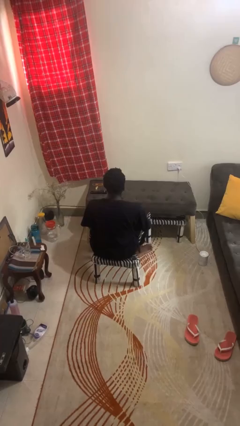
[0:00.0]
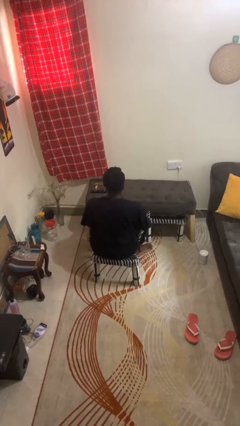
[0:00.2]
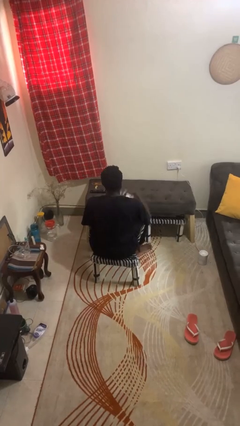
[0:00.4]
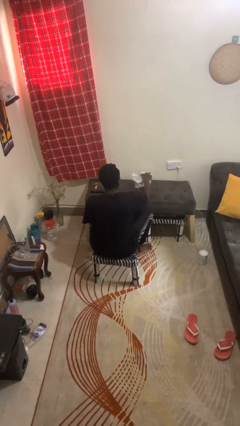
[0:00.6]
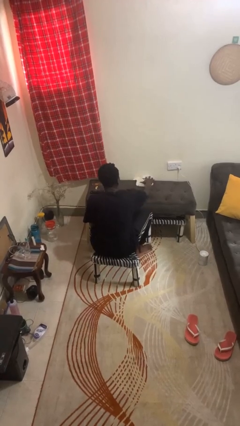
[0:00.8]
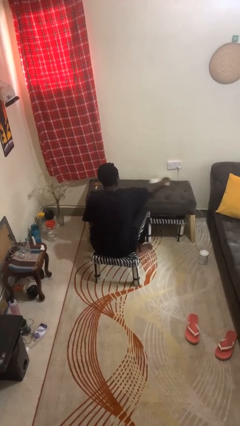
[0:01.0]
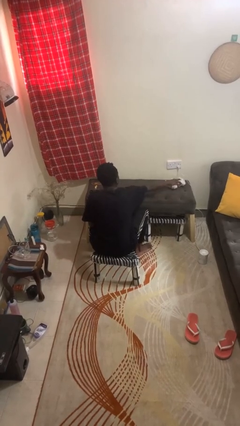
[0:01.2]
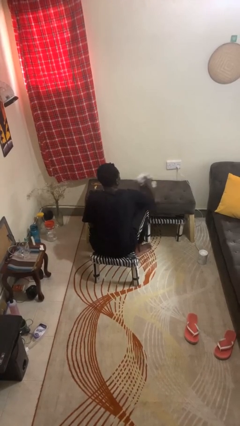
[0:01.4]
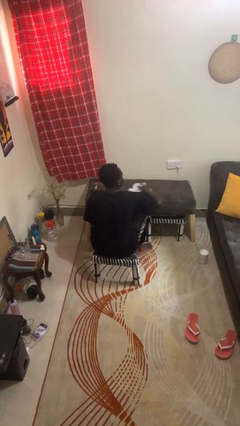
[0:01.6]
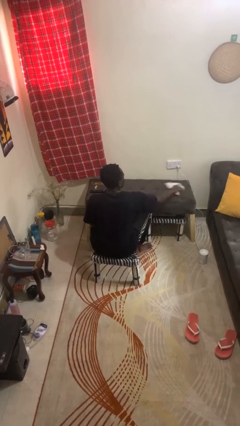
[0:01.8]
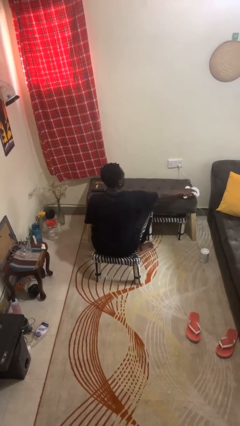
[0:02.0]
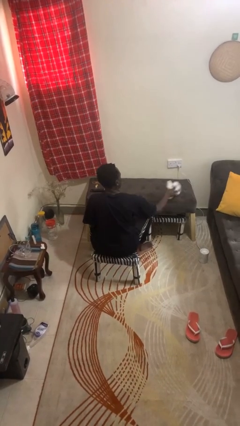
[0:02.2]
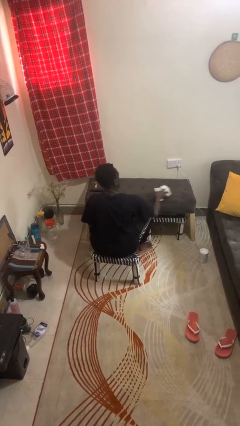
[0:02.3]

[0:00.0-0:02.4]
person cleans table with rag

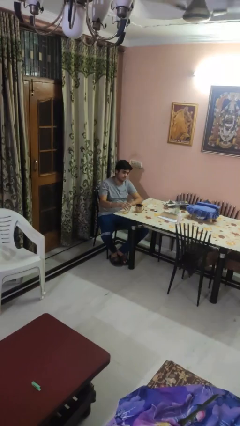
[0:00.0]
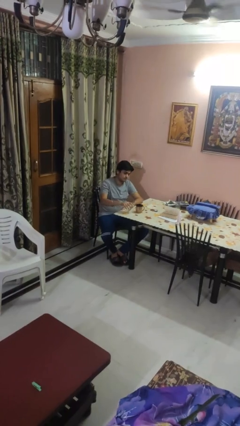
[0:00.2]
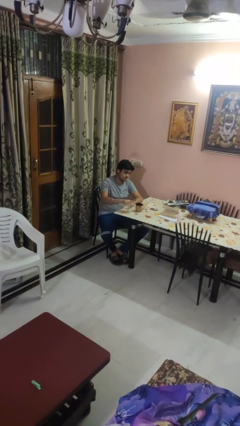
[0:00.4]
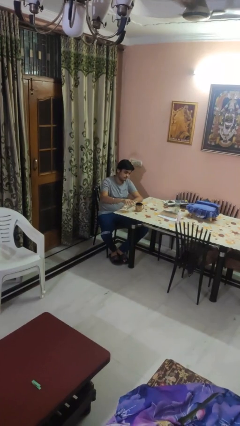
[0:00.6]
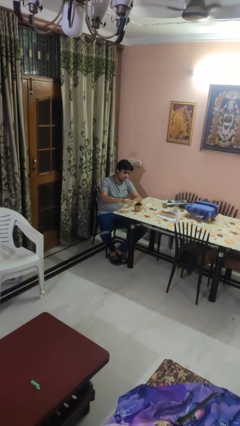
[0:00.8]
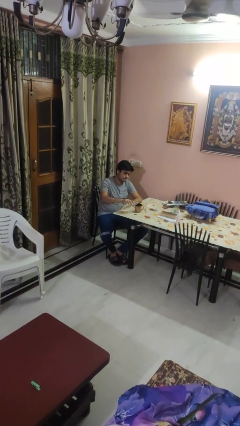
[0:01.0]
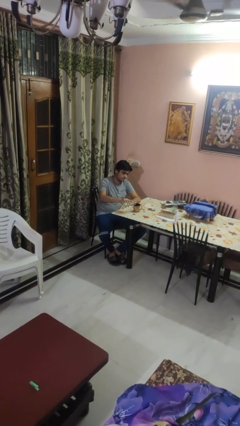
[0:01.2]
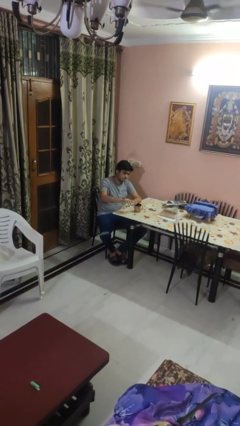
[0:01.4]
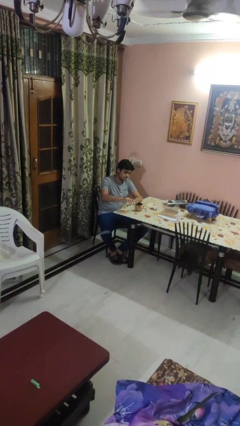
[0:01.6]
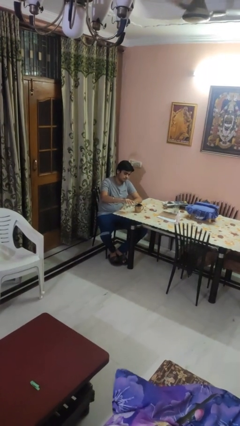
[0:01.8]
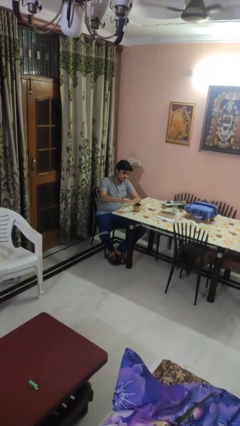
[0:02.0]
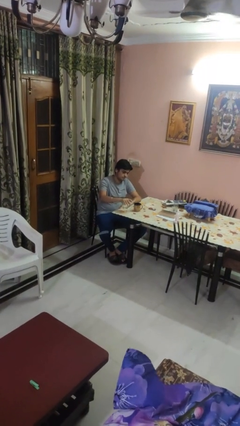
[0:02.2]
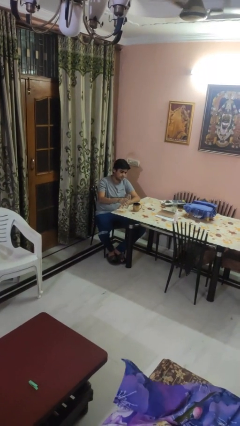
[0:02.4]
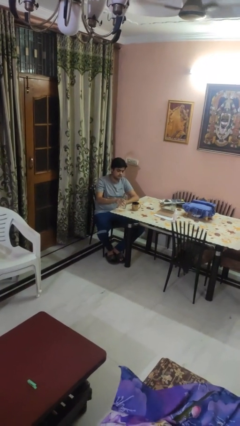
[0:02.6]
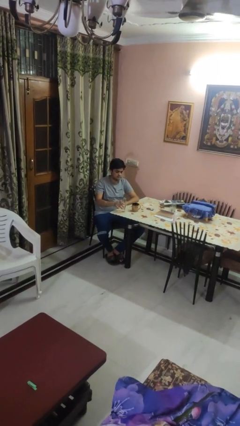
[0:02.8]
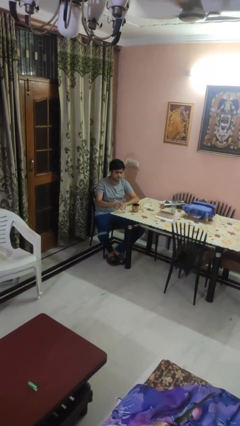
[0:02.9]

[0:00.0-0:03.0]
person pours liquid into cup

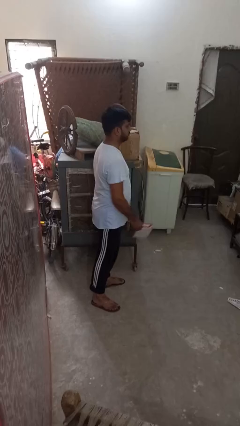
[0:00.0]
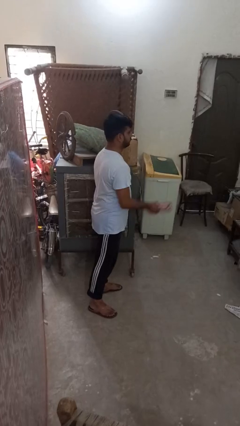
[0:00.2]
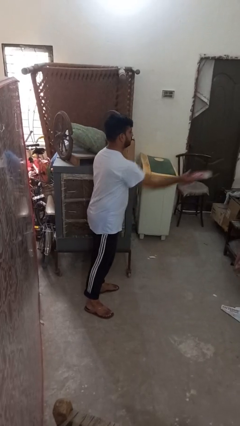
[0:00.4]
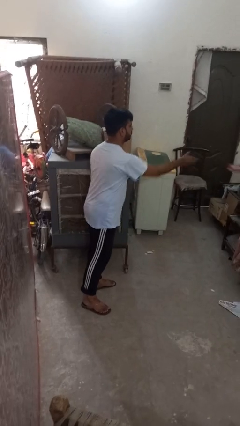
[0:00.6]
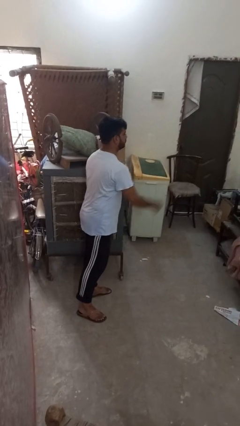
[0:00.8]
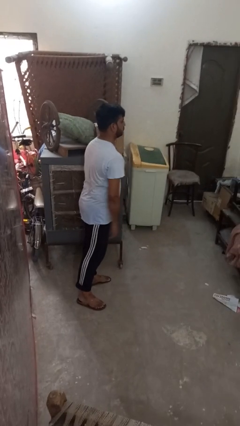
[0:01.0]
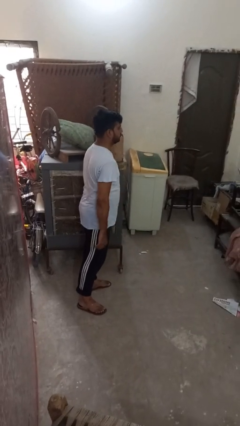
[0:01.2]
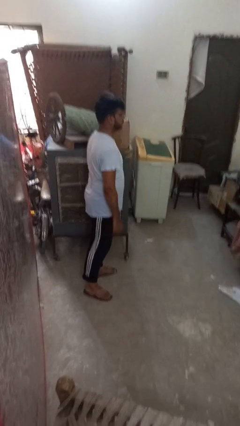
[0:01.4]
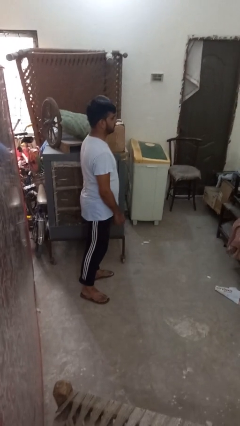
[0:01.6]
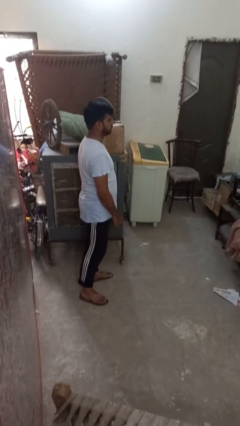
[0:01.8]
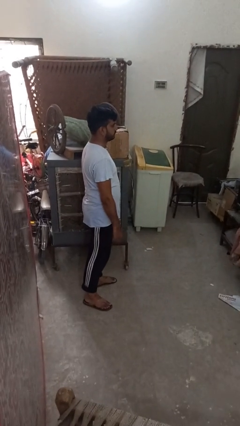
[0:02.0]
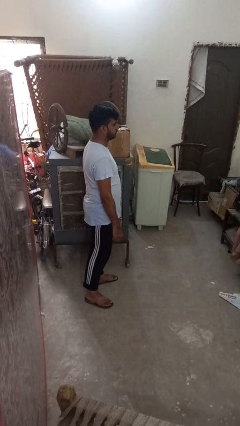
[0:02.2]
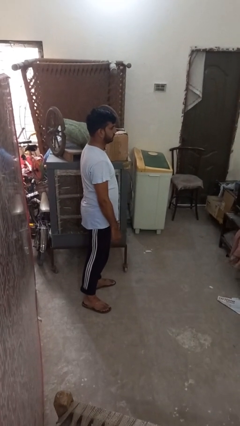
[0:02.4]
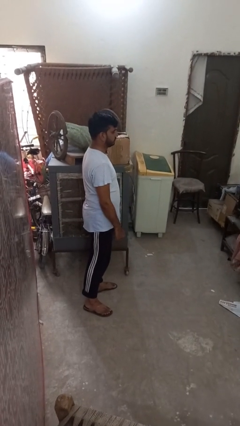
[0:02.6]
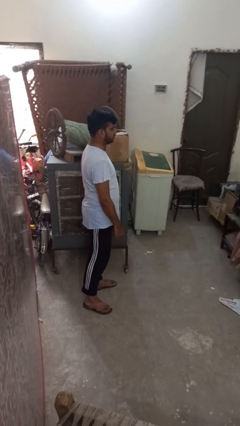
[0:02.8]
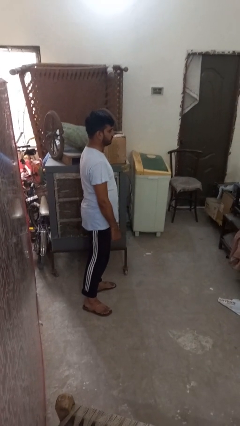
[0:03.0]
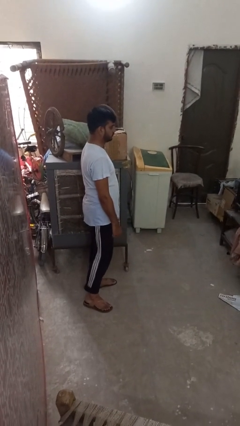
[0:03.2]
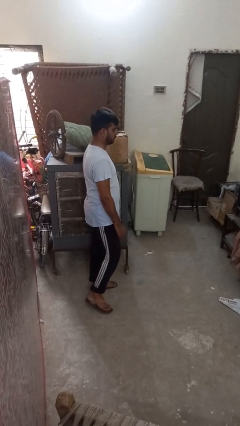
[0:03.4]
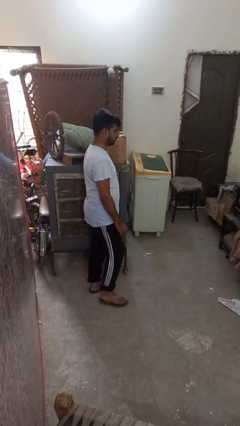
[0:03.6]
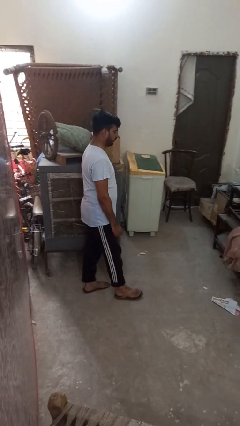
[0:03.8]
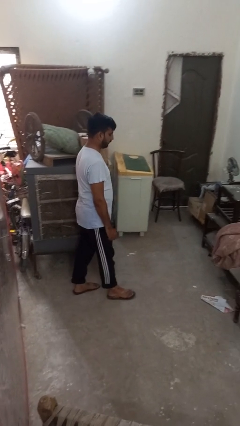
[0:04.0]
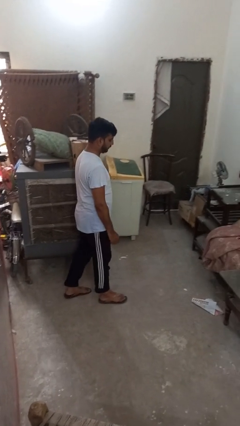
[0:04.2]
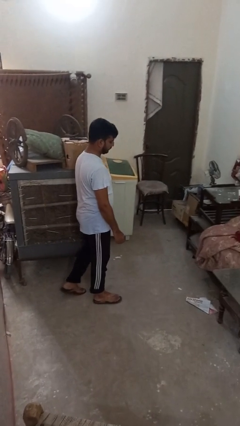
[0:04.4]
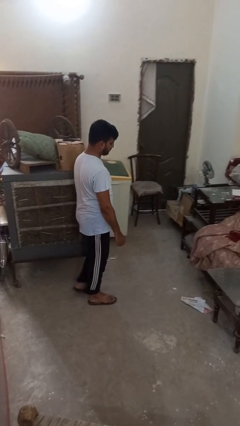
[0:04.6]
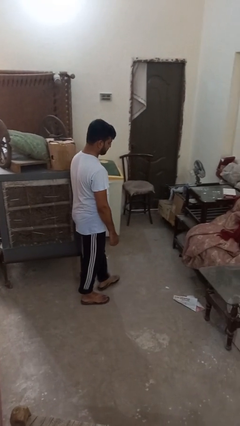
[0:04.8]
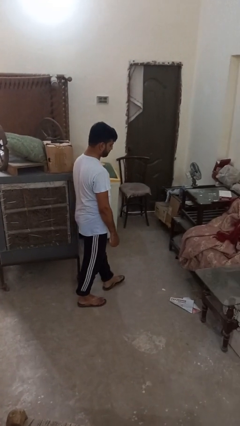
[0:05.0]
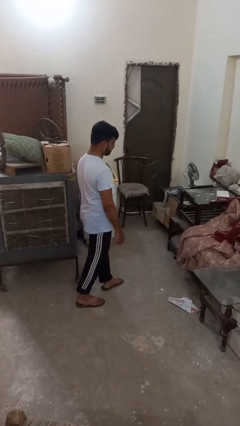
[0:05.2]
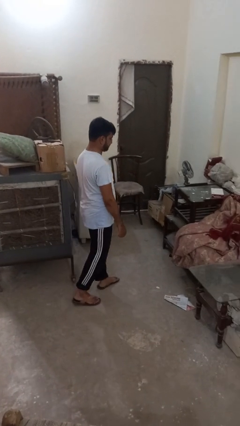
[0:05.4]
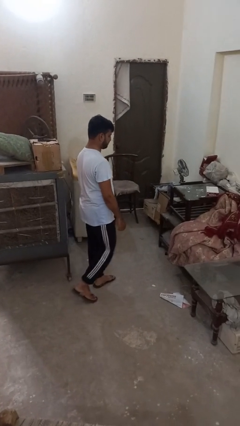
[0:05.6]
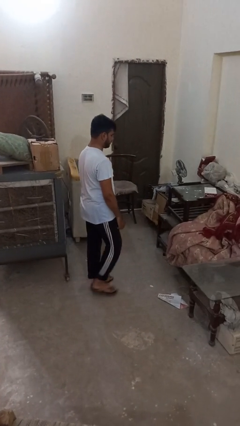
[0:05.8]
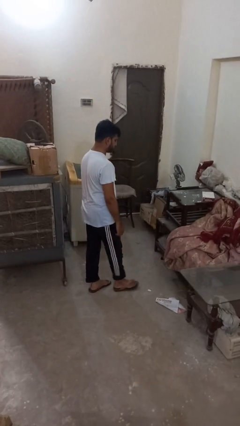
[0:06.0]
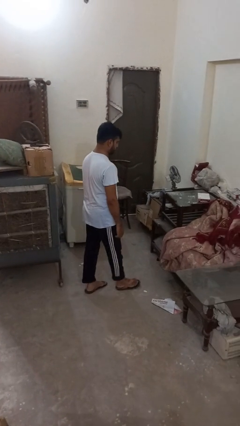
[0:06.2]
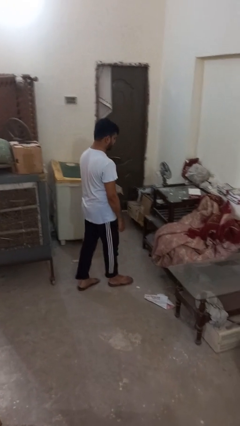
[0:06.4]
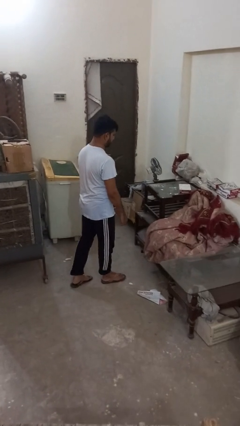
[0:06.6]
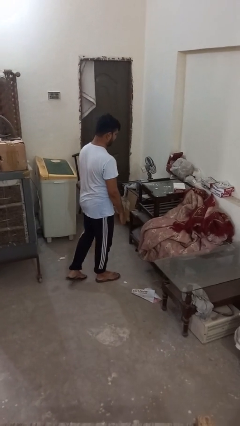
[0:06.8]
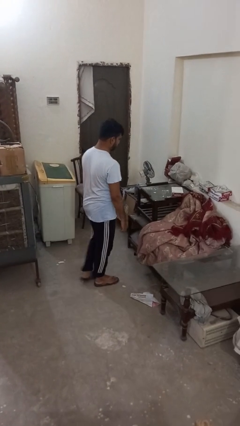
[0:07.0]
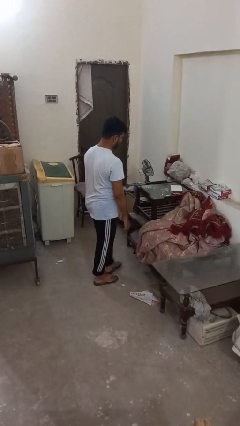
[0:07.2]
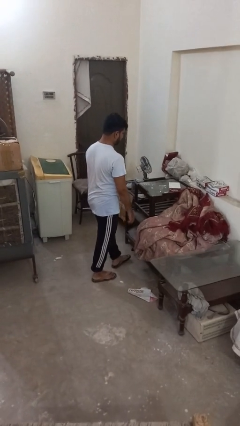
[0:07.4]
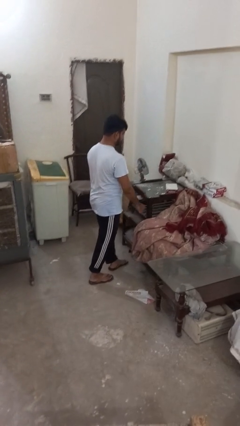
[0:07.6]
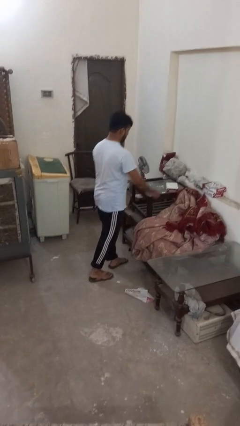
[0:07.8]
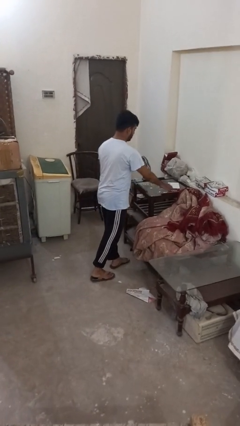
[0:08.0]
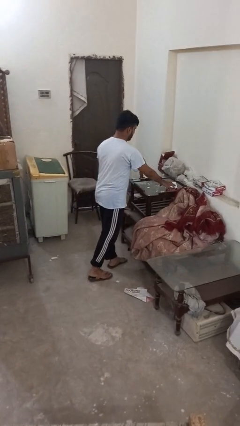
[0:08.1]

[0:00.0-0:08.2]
person throws object on table

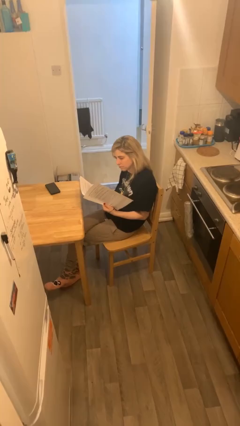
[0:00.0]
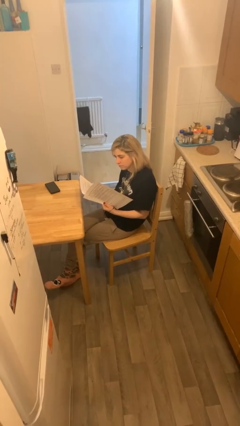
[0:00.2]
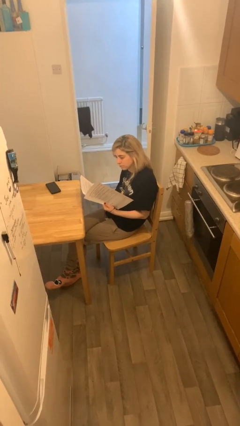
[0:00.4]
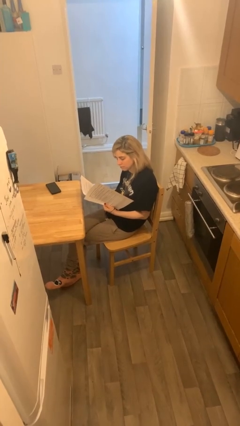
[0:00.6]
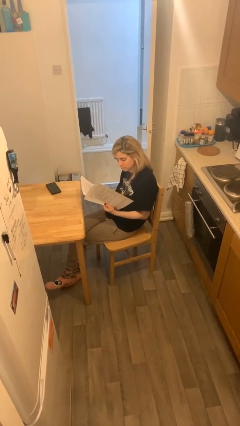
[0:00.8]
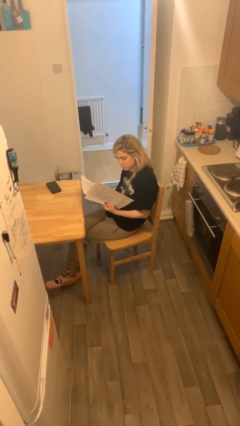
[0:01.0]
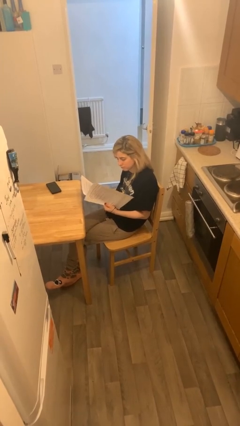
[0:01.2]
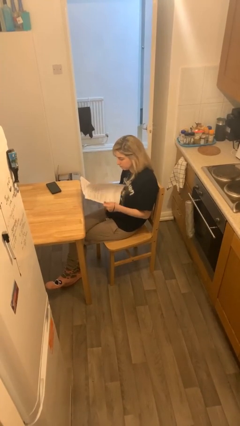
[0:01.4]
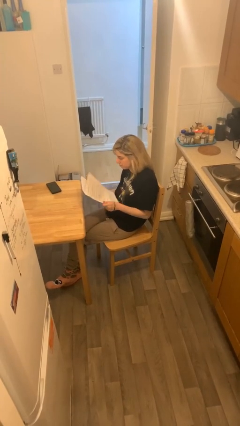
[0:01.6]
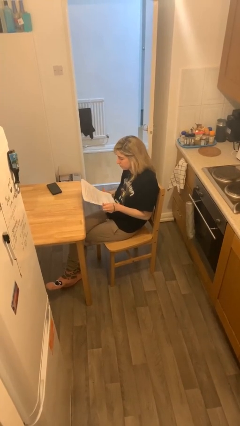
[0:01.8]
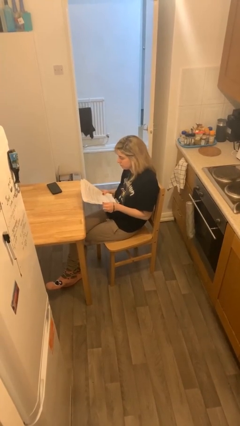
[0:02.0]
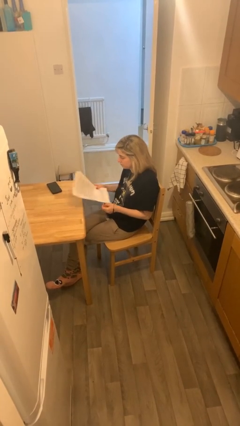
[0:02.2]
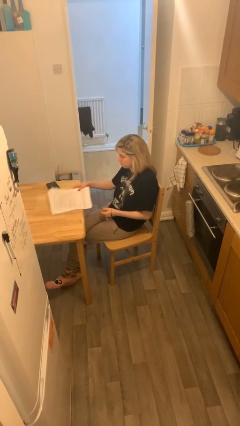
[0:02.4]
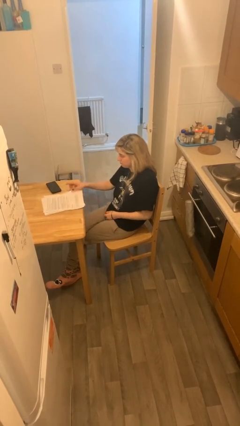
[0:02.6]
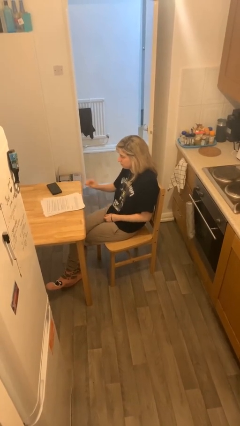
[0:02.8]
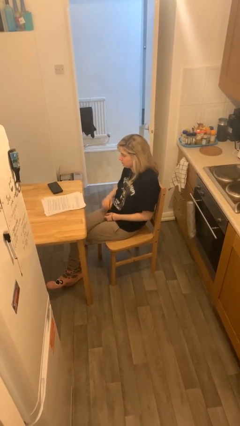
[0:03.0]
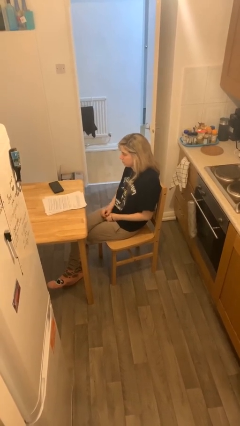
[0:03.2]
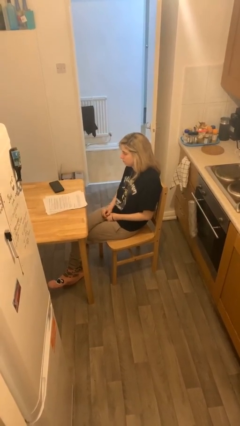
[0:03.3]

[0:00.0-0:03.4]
person puts down object on table

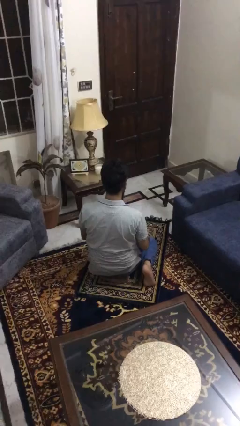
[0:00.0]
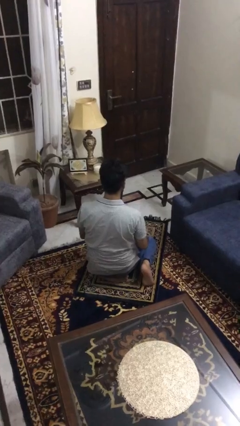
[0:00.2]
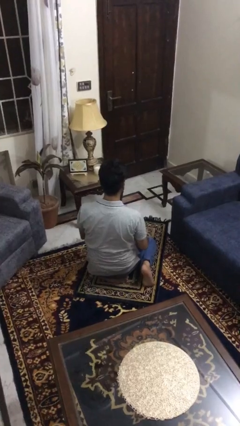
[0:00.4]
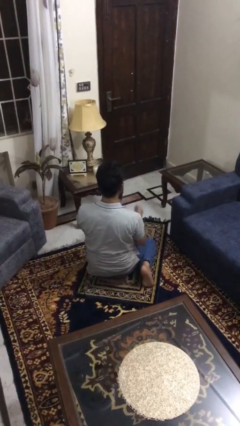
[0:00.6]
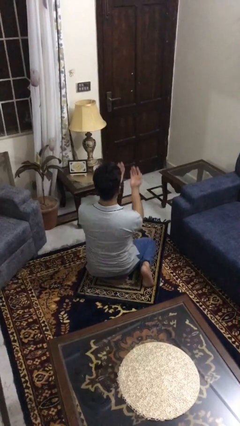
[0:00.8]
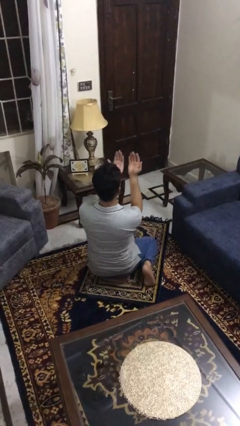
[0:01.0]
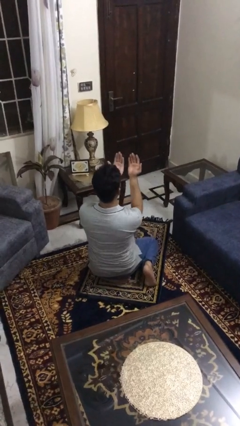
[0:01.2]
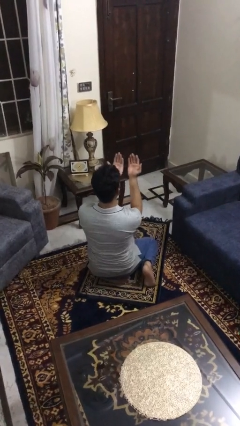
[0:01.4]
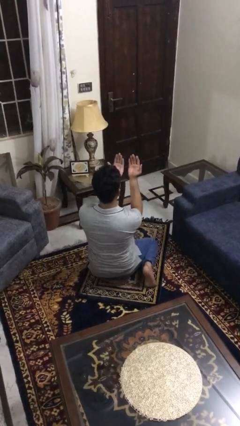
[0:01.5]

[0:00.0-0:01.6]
person prays
